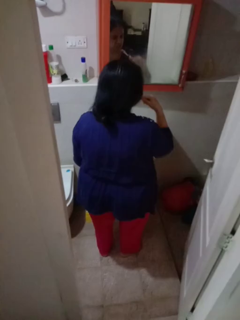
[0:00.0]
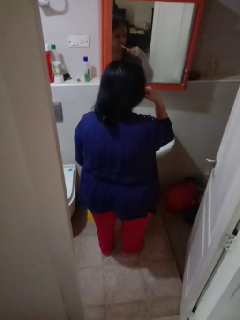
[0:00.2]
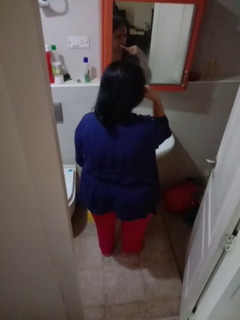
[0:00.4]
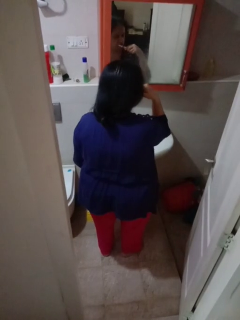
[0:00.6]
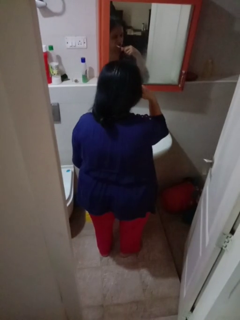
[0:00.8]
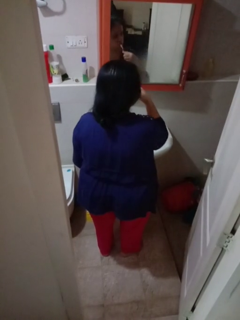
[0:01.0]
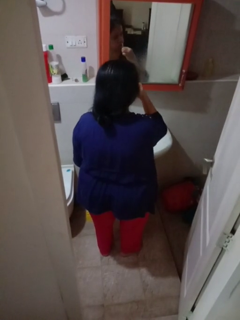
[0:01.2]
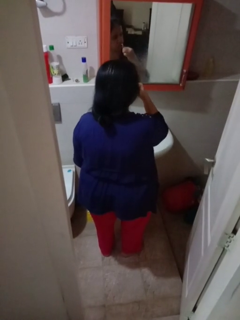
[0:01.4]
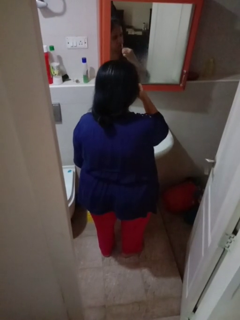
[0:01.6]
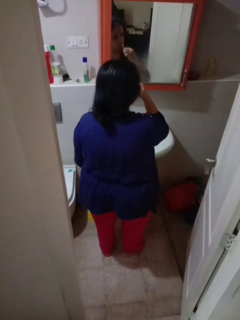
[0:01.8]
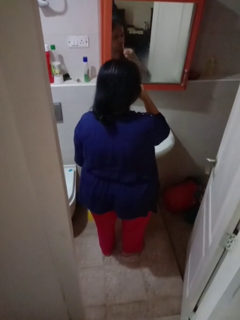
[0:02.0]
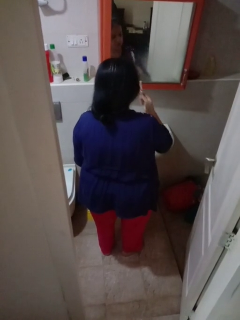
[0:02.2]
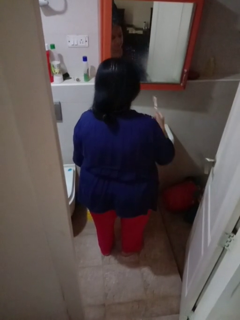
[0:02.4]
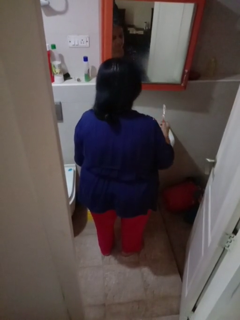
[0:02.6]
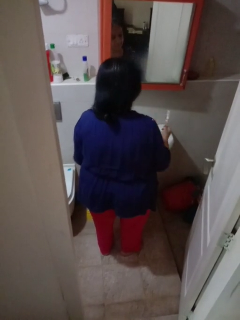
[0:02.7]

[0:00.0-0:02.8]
person brushes teeth

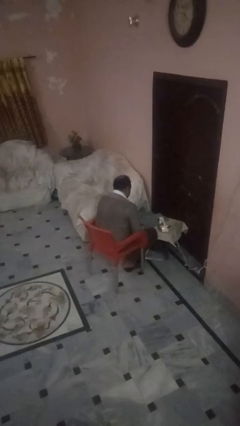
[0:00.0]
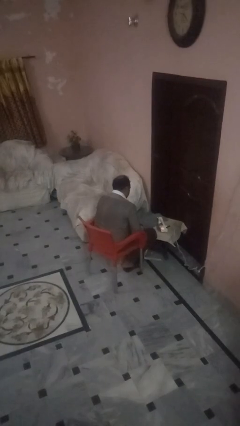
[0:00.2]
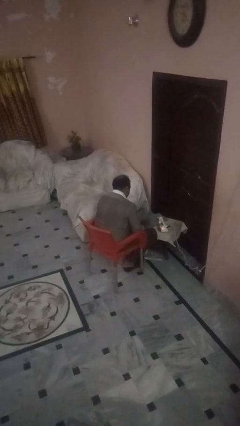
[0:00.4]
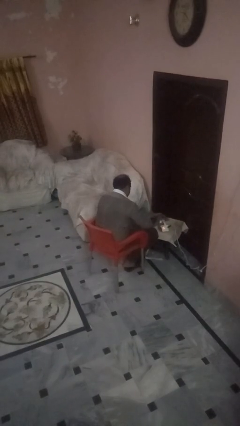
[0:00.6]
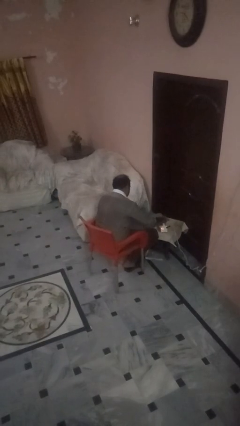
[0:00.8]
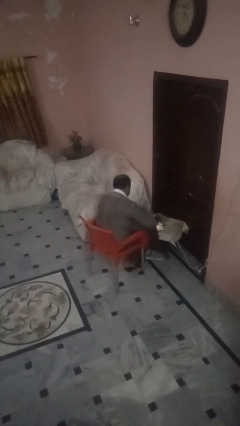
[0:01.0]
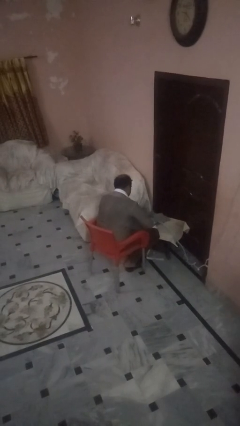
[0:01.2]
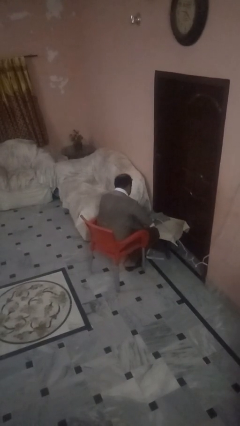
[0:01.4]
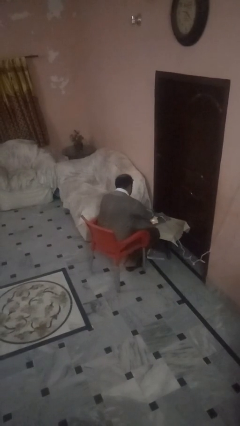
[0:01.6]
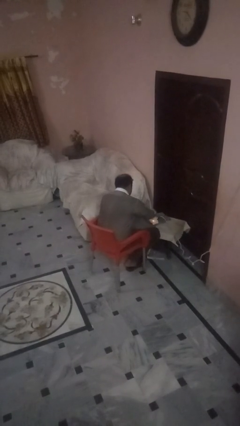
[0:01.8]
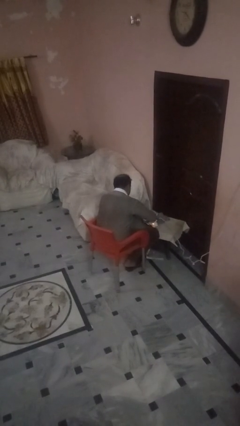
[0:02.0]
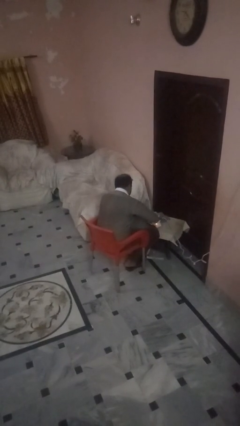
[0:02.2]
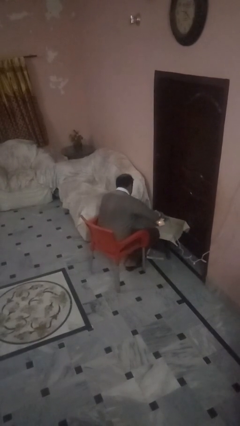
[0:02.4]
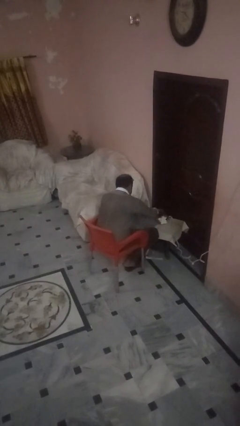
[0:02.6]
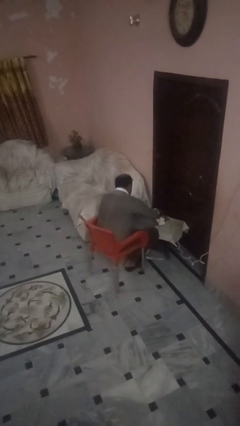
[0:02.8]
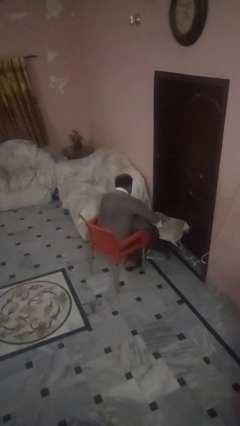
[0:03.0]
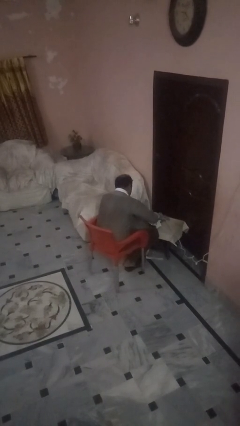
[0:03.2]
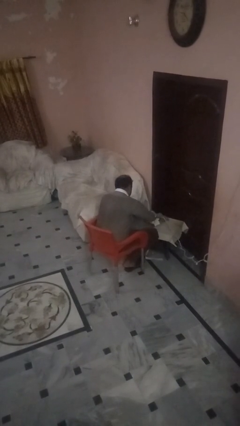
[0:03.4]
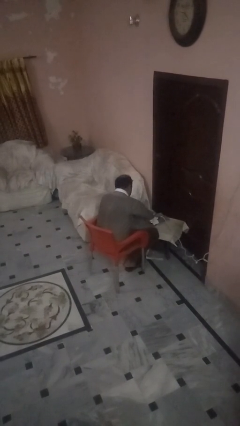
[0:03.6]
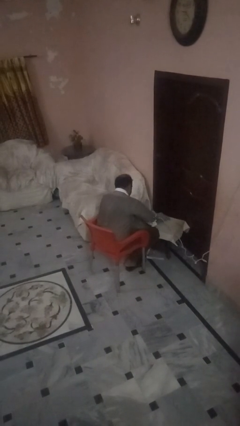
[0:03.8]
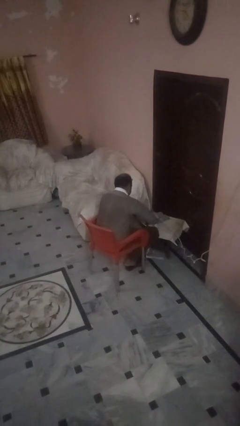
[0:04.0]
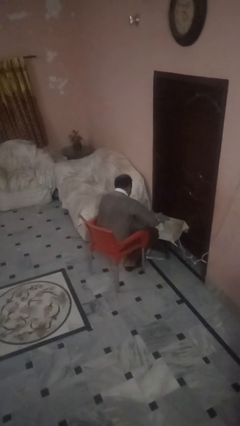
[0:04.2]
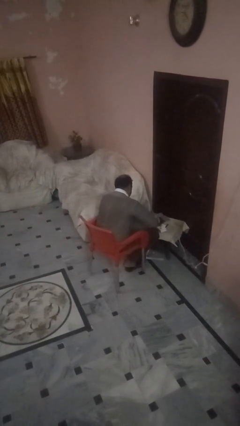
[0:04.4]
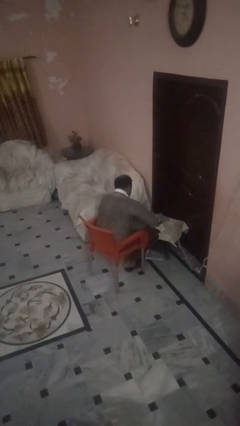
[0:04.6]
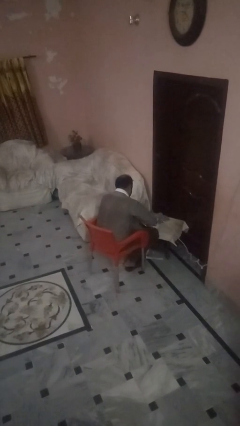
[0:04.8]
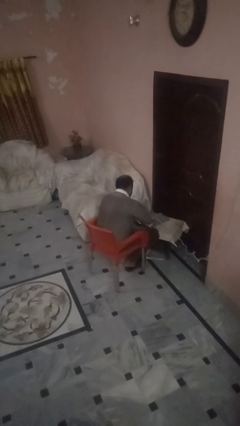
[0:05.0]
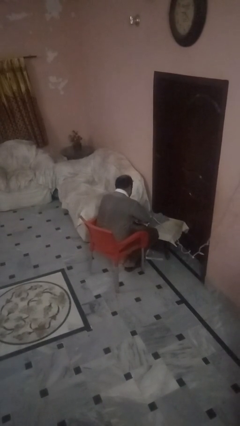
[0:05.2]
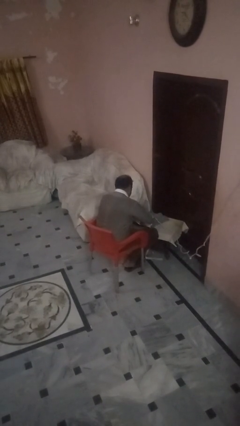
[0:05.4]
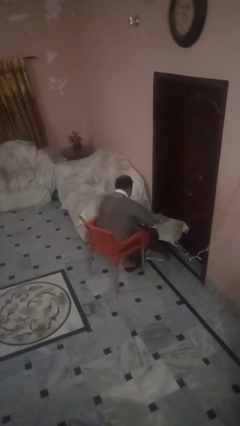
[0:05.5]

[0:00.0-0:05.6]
person irons clothes

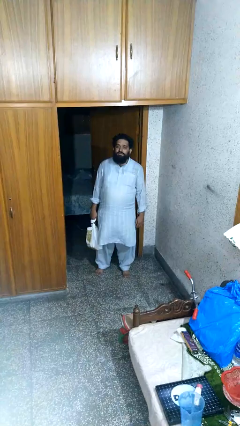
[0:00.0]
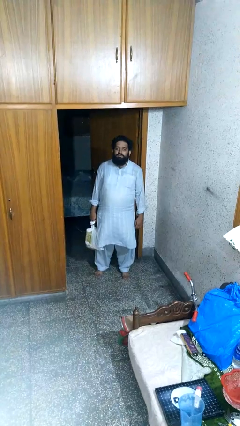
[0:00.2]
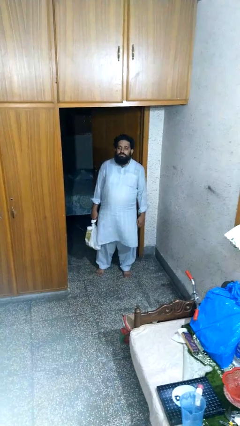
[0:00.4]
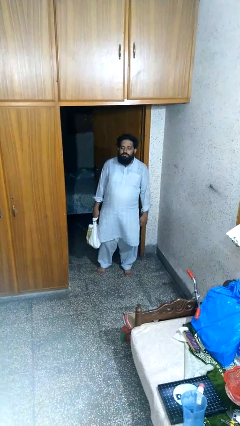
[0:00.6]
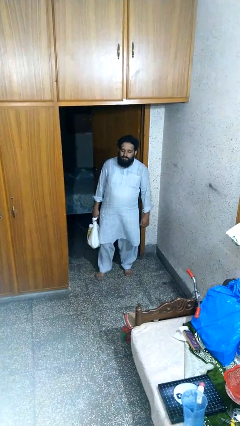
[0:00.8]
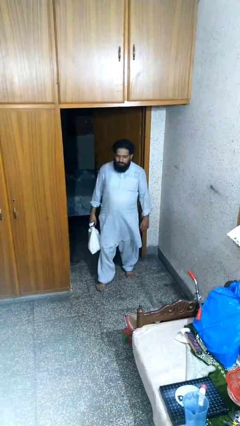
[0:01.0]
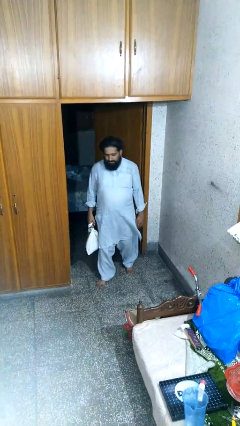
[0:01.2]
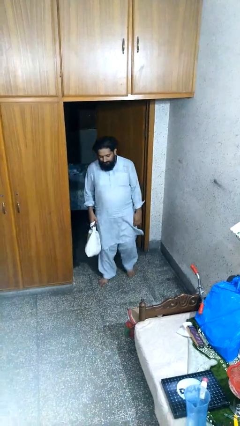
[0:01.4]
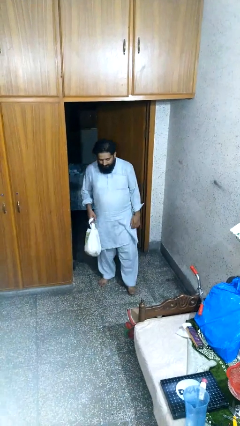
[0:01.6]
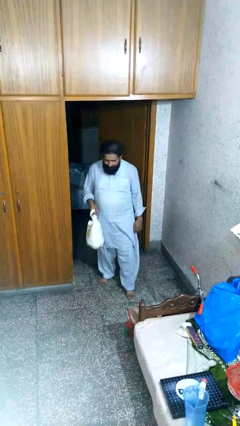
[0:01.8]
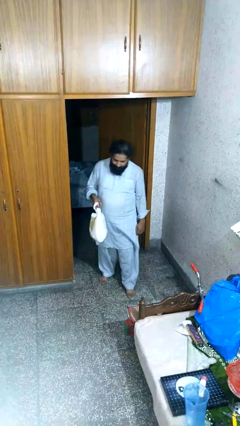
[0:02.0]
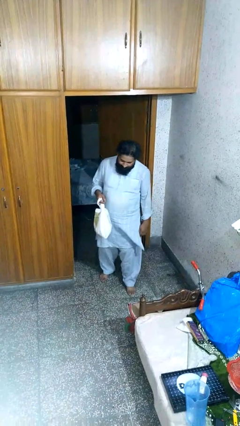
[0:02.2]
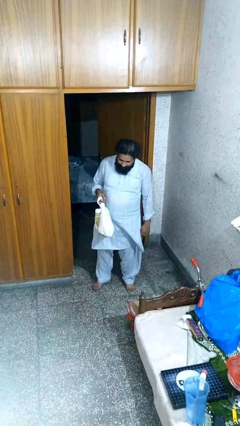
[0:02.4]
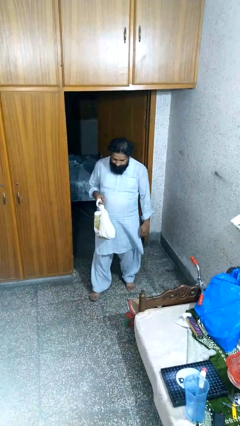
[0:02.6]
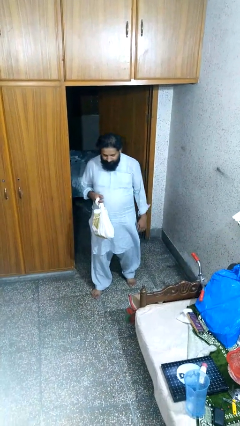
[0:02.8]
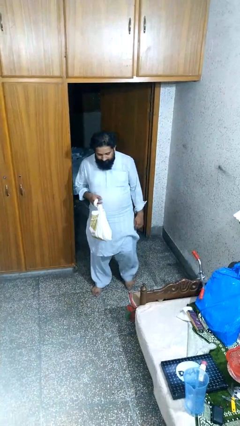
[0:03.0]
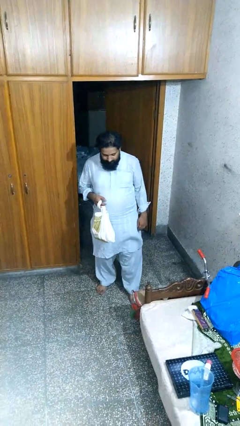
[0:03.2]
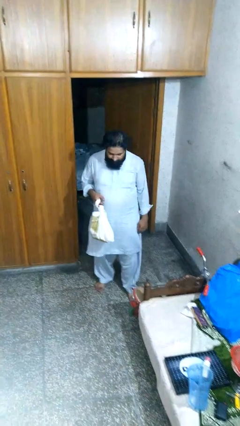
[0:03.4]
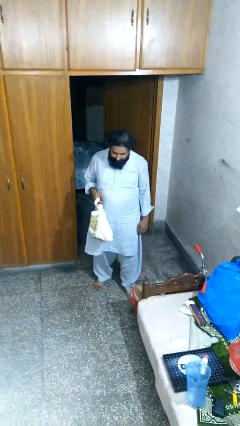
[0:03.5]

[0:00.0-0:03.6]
person carries groceries

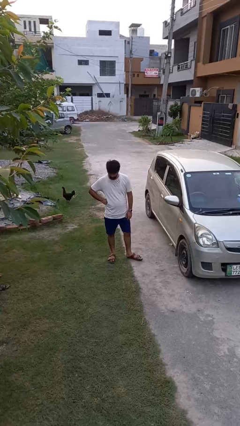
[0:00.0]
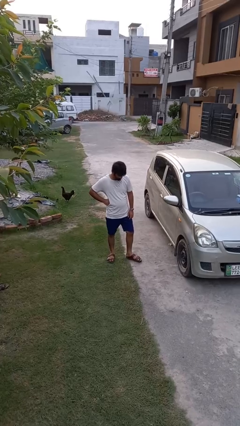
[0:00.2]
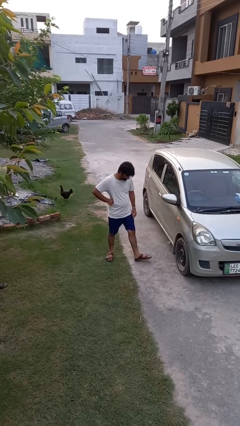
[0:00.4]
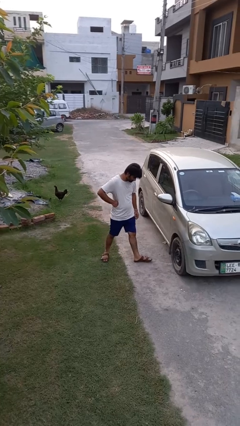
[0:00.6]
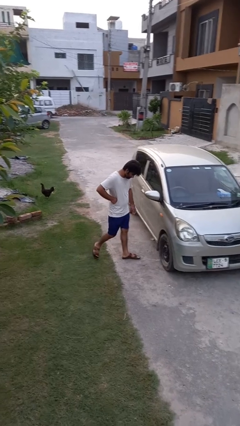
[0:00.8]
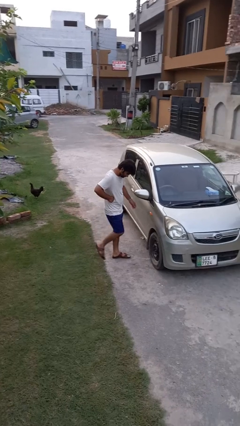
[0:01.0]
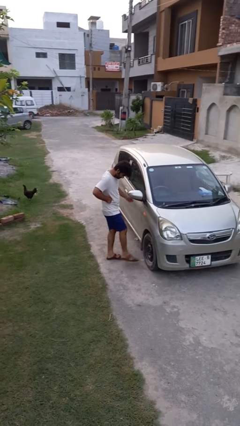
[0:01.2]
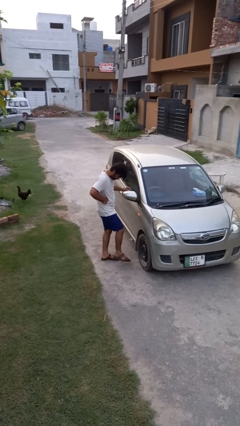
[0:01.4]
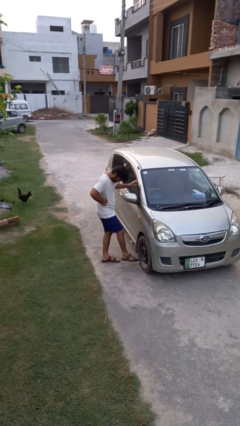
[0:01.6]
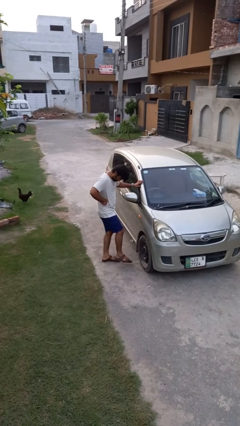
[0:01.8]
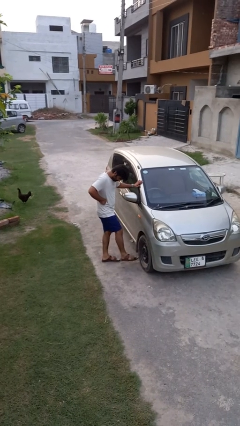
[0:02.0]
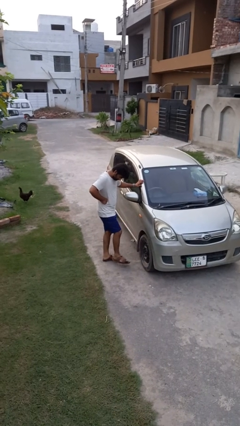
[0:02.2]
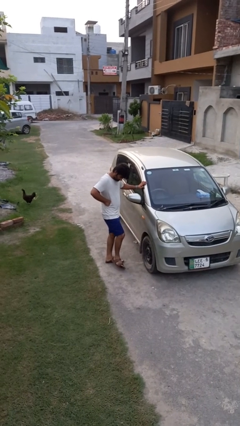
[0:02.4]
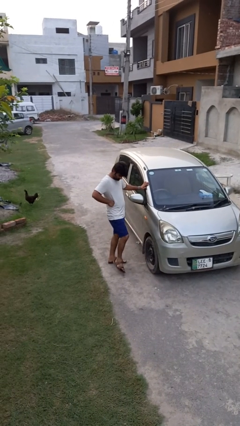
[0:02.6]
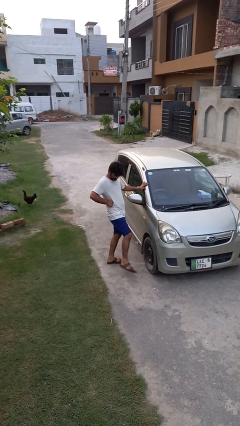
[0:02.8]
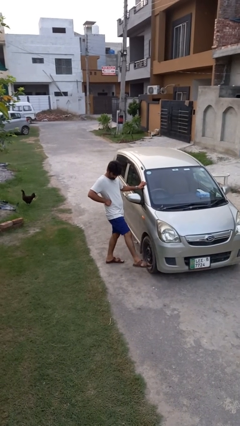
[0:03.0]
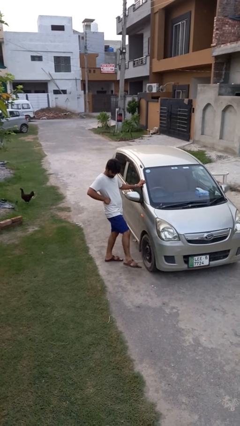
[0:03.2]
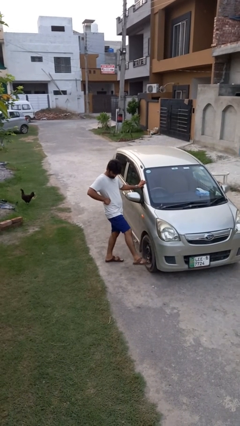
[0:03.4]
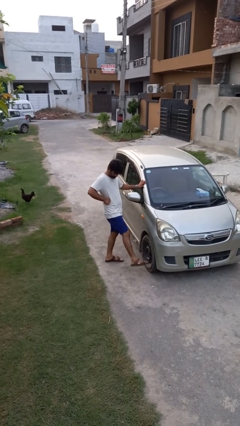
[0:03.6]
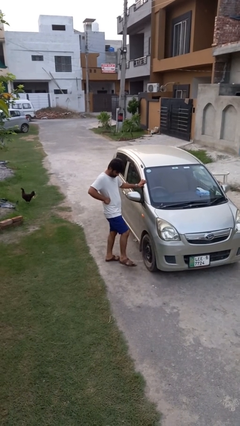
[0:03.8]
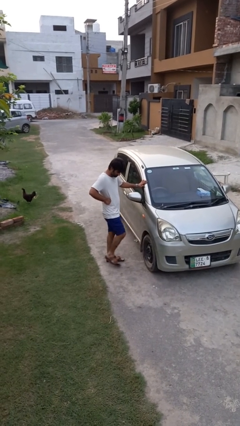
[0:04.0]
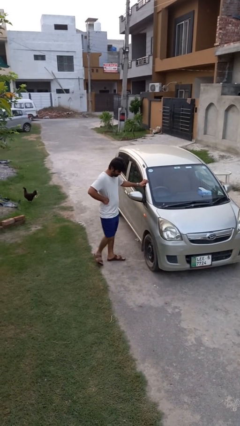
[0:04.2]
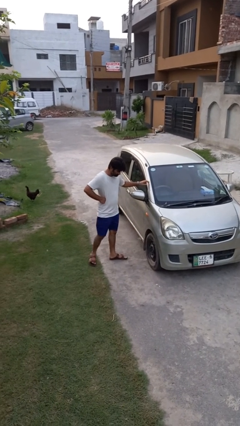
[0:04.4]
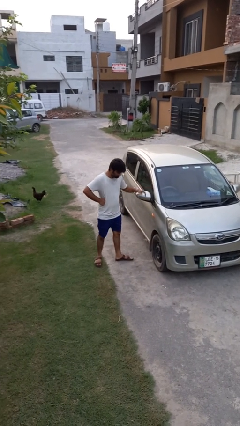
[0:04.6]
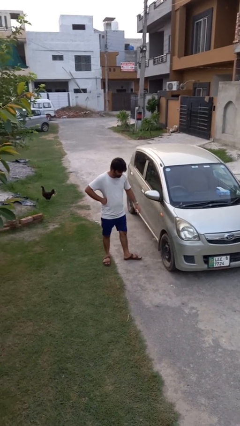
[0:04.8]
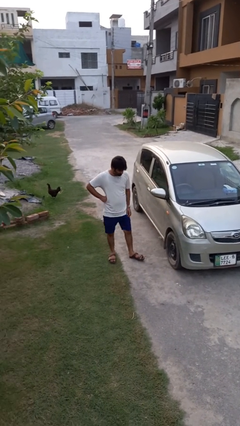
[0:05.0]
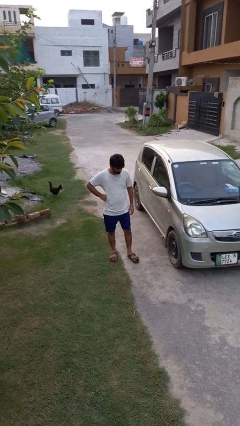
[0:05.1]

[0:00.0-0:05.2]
person kicks car tires

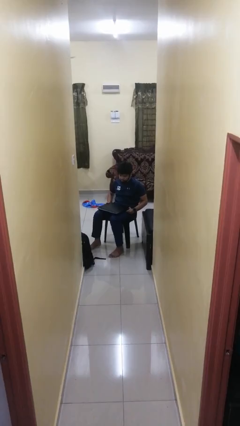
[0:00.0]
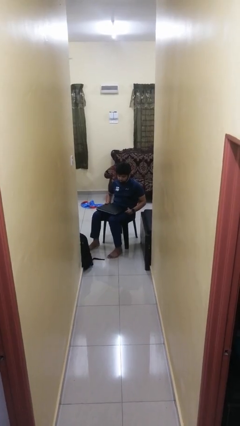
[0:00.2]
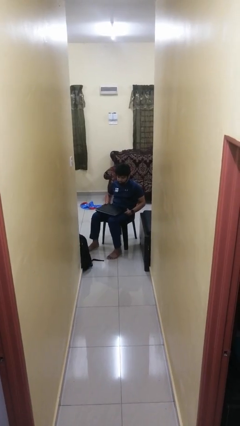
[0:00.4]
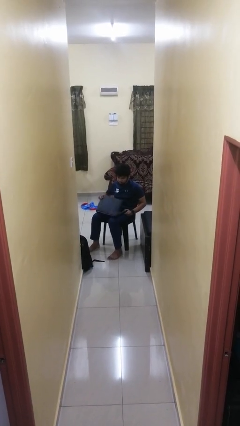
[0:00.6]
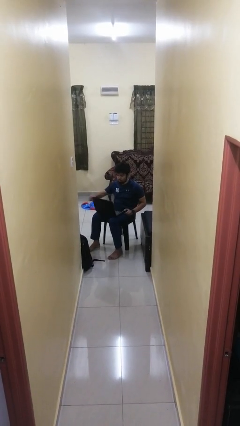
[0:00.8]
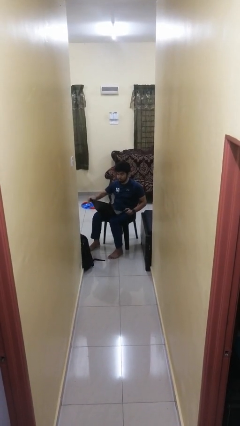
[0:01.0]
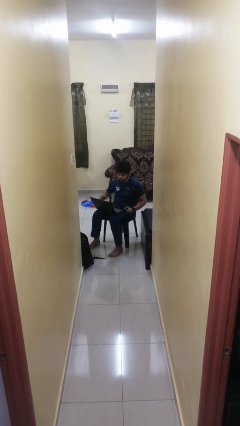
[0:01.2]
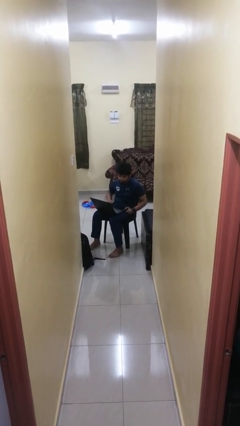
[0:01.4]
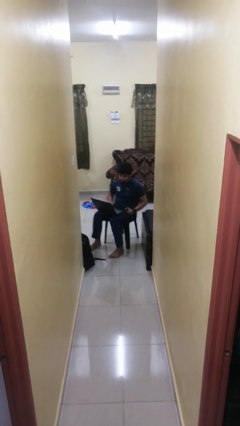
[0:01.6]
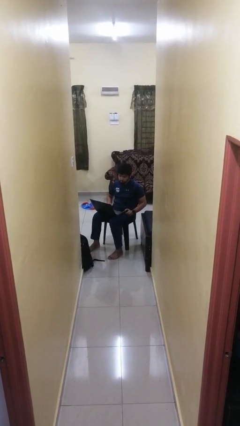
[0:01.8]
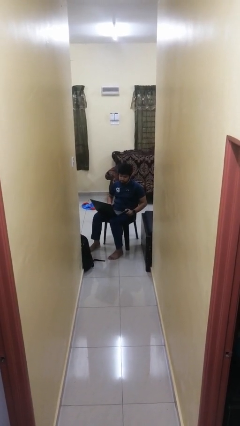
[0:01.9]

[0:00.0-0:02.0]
person opens laptop
